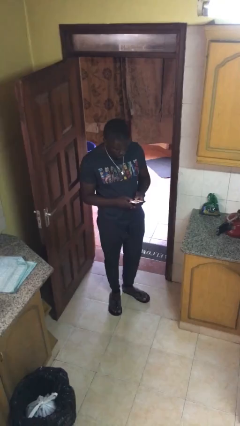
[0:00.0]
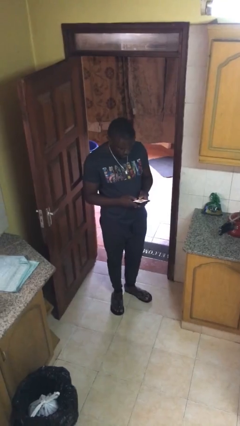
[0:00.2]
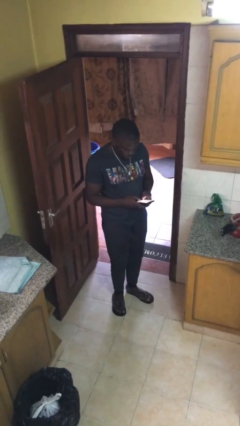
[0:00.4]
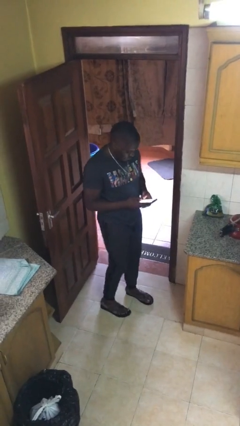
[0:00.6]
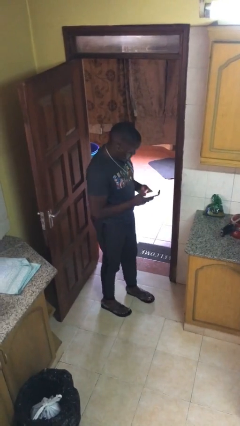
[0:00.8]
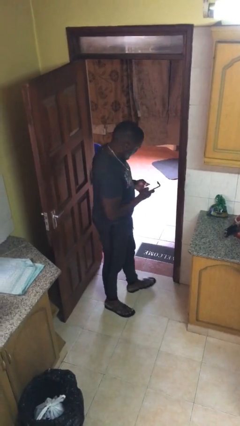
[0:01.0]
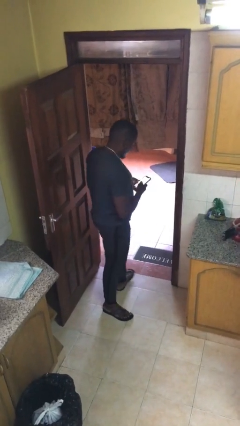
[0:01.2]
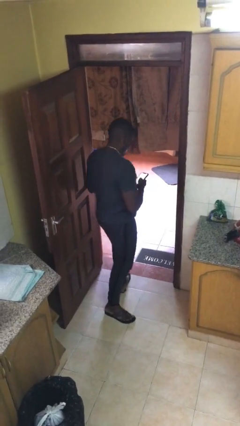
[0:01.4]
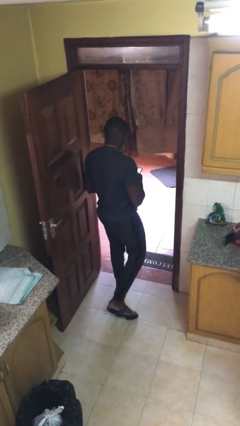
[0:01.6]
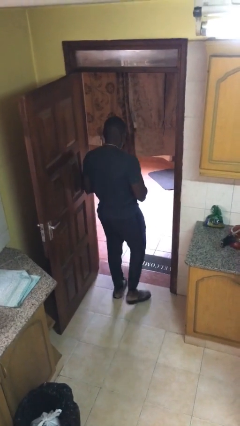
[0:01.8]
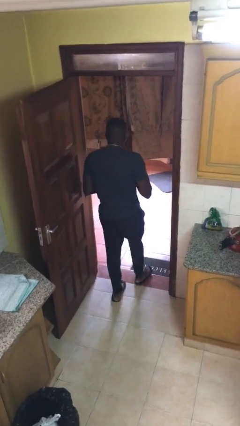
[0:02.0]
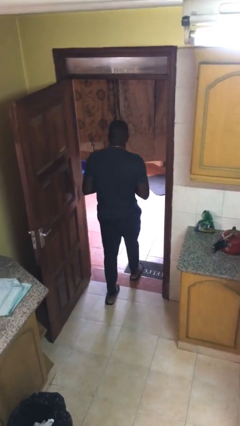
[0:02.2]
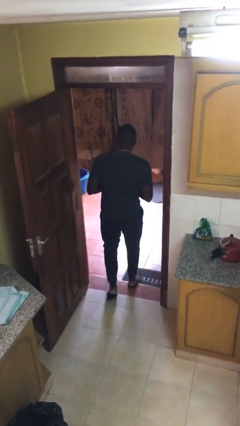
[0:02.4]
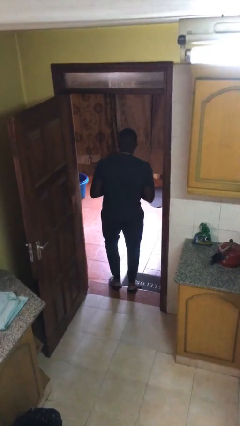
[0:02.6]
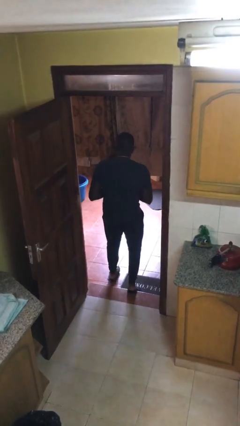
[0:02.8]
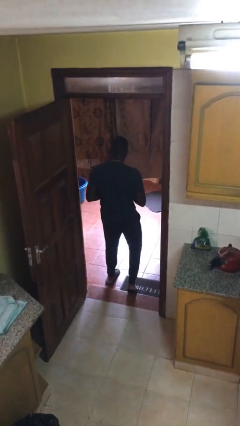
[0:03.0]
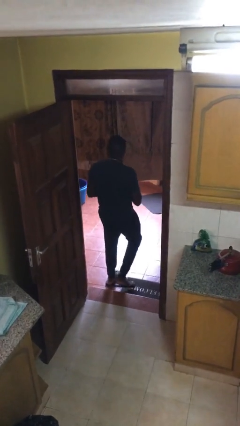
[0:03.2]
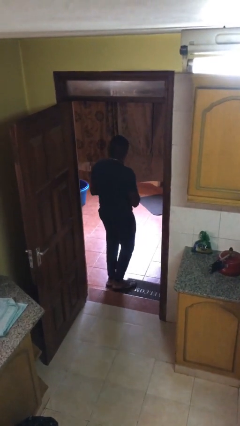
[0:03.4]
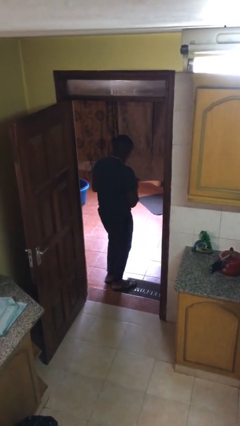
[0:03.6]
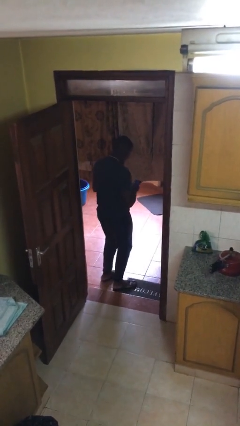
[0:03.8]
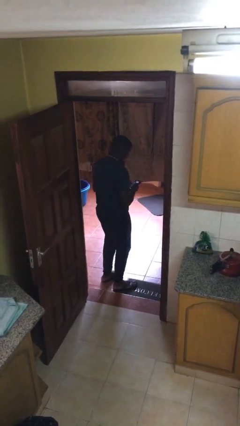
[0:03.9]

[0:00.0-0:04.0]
person exits scene through structure

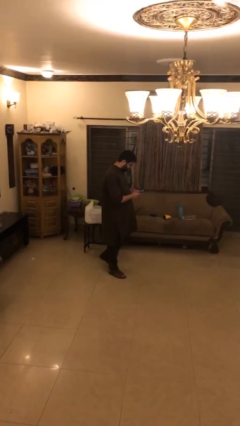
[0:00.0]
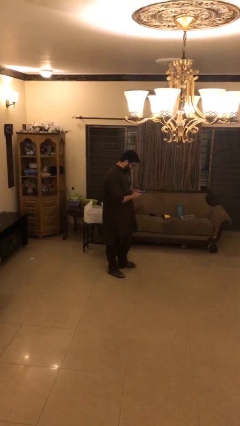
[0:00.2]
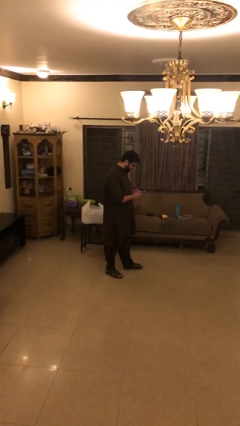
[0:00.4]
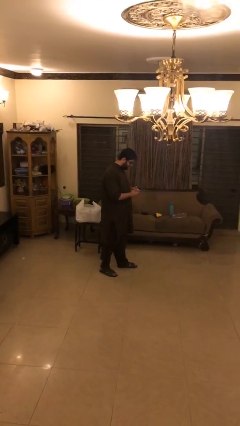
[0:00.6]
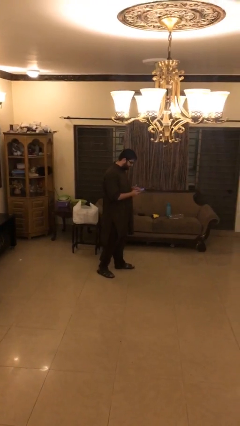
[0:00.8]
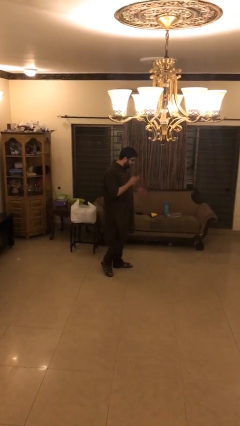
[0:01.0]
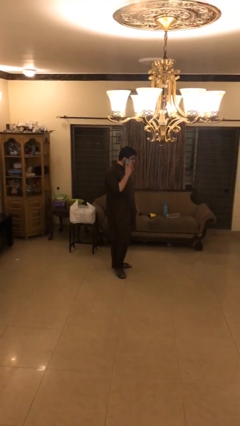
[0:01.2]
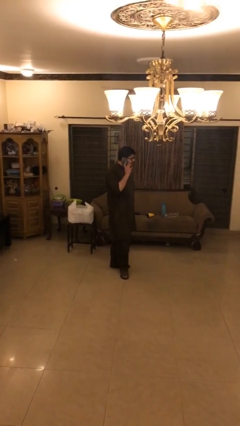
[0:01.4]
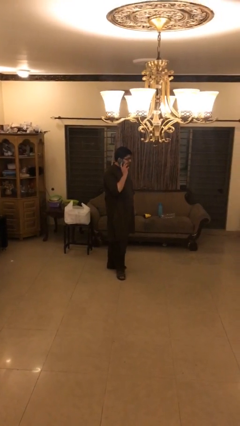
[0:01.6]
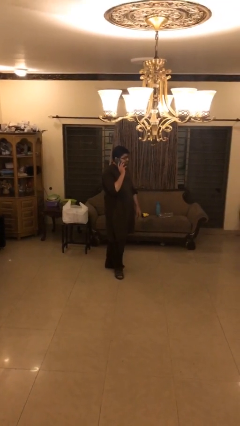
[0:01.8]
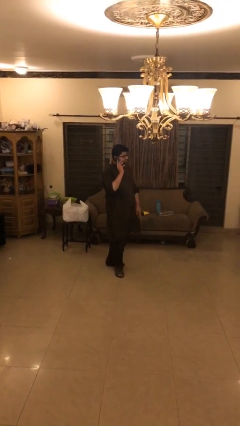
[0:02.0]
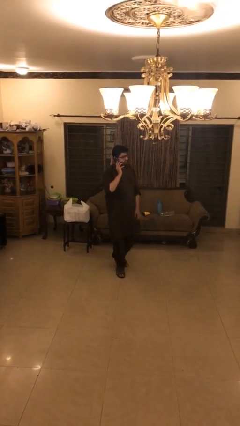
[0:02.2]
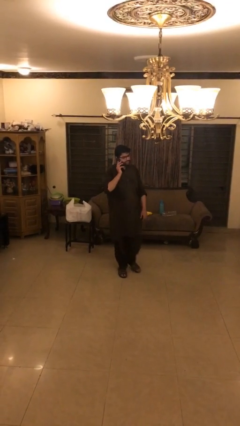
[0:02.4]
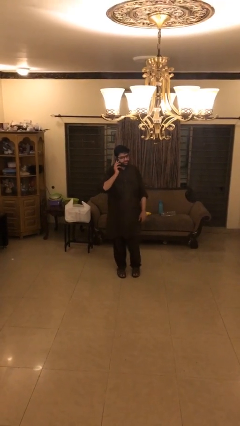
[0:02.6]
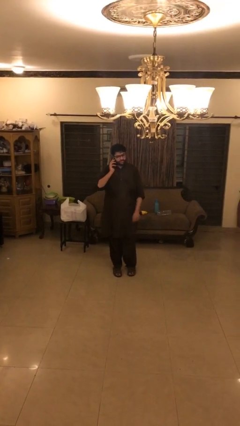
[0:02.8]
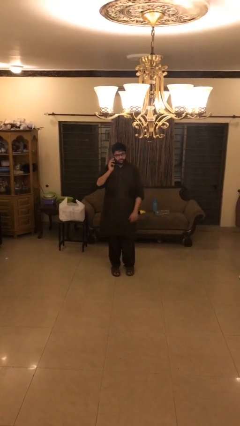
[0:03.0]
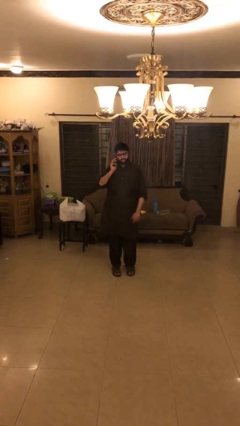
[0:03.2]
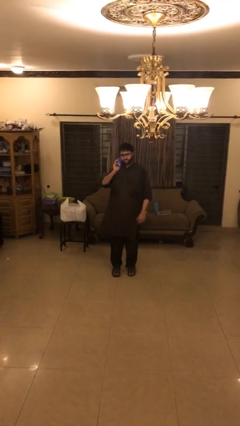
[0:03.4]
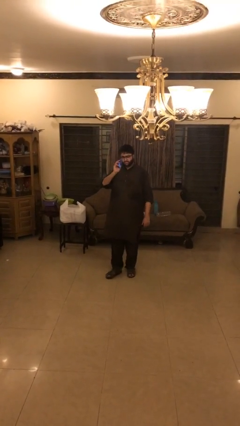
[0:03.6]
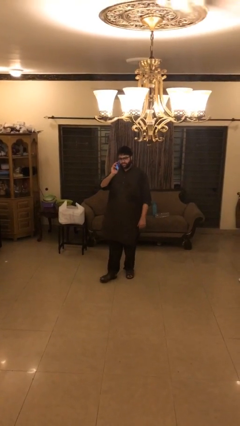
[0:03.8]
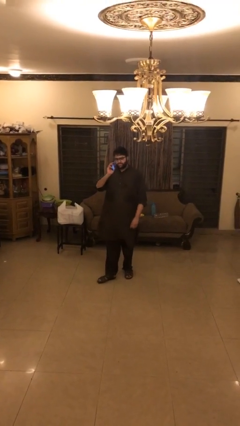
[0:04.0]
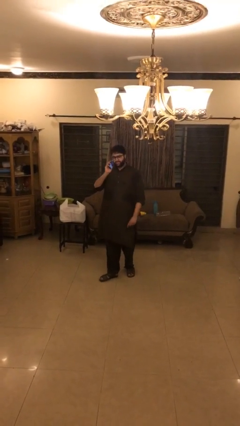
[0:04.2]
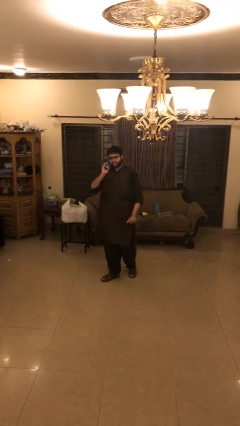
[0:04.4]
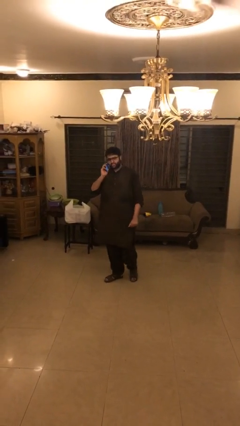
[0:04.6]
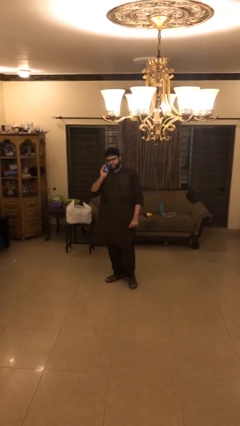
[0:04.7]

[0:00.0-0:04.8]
person talks on phone

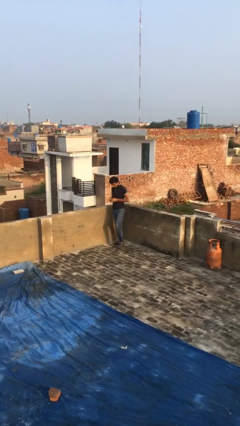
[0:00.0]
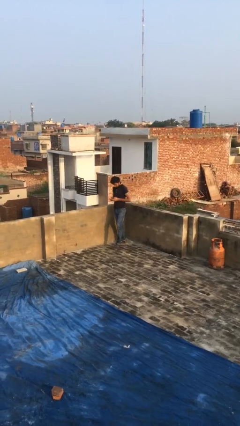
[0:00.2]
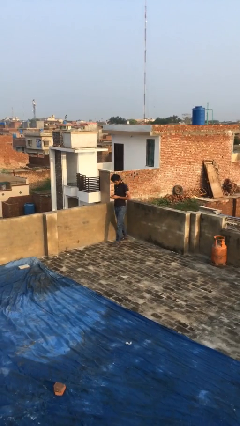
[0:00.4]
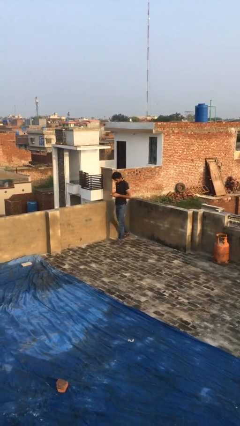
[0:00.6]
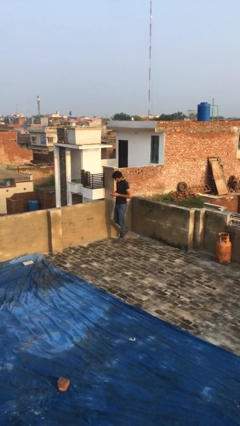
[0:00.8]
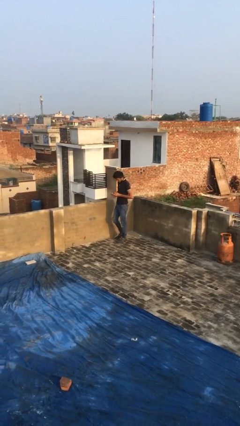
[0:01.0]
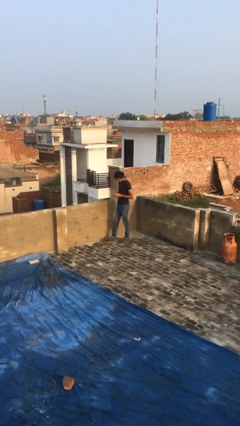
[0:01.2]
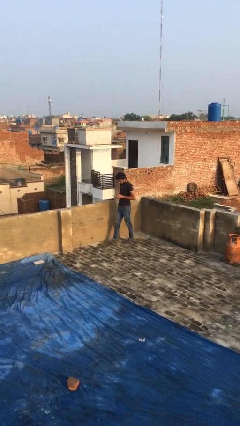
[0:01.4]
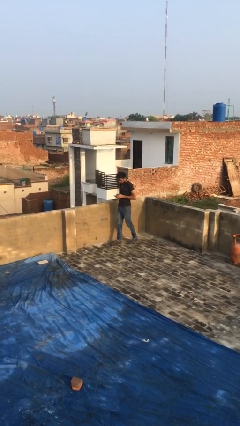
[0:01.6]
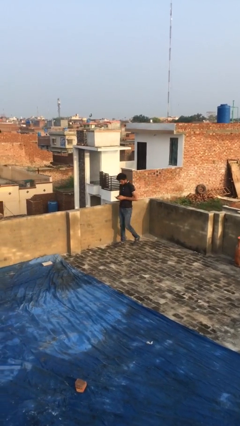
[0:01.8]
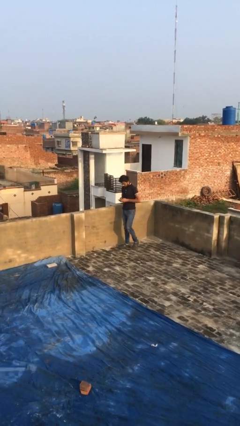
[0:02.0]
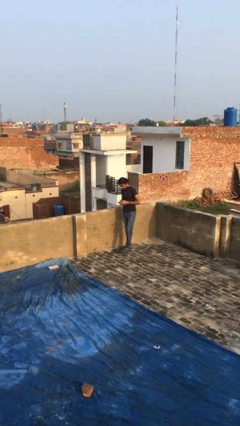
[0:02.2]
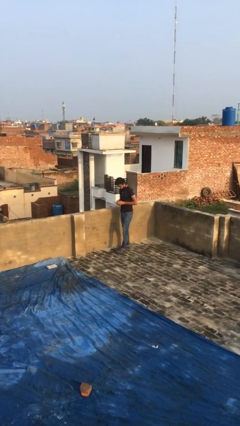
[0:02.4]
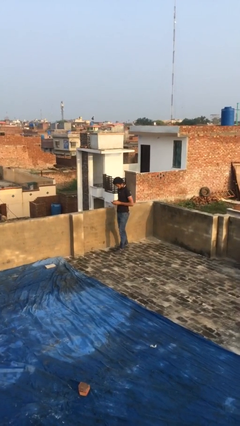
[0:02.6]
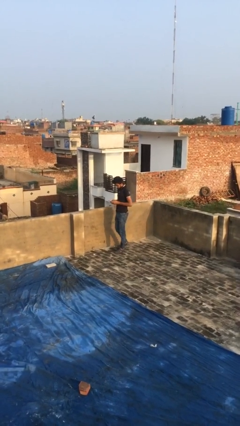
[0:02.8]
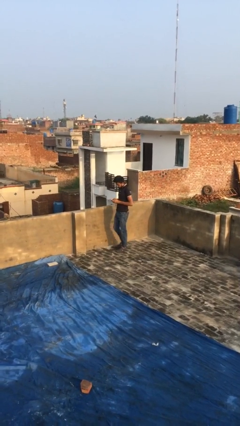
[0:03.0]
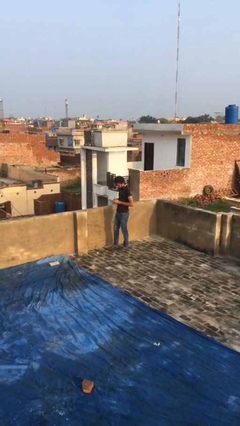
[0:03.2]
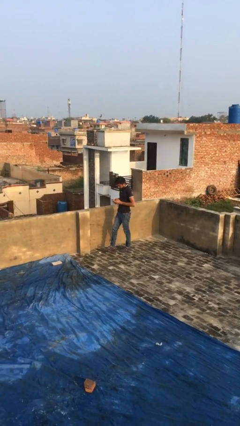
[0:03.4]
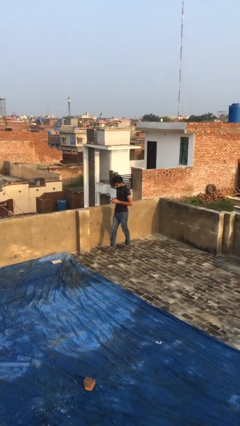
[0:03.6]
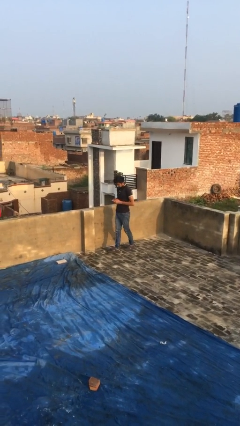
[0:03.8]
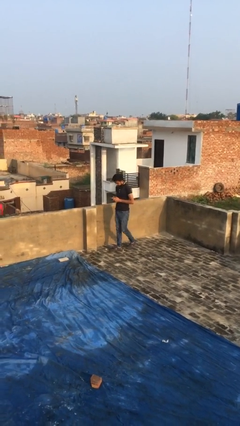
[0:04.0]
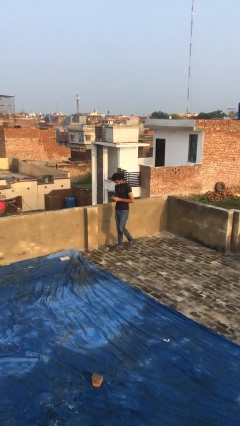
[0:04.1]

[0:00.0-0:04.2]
person texts on phone

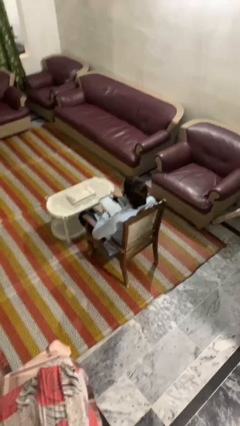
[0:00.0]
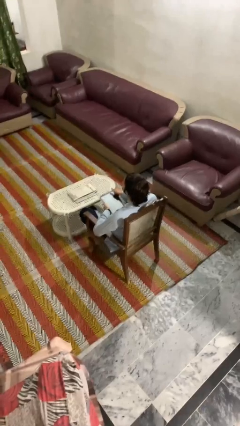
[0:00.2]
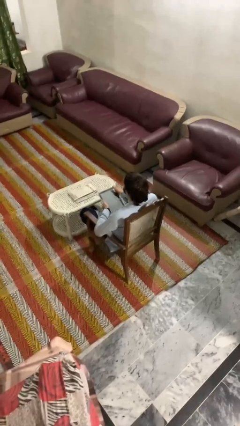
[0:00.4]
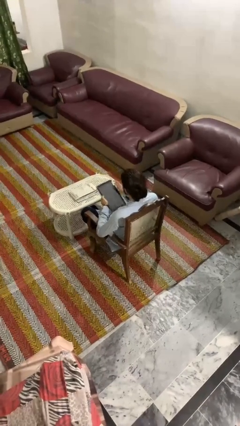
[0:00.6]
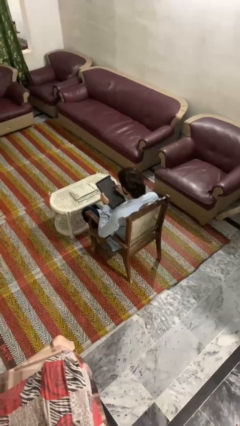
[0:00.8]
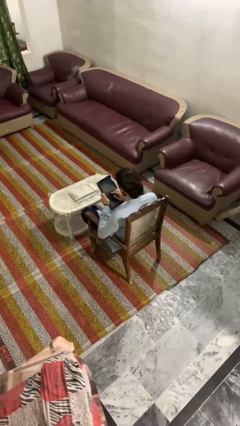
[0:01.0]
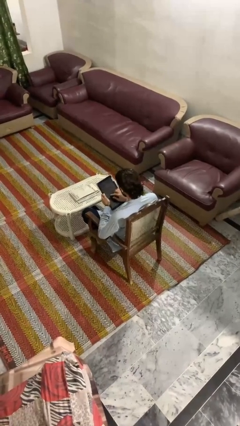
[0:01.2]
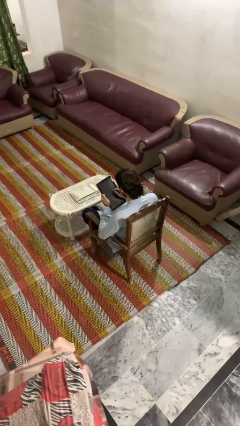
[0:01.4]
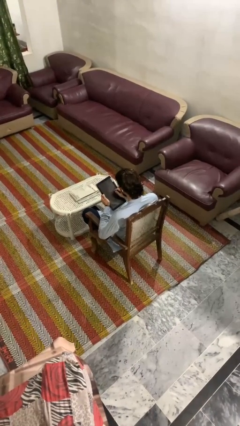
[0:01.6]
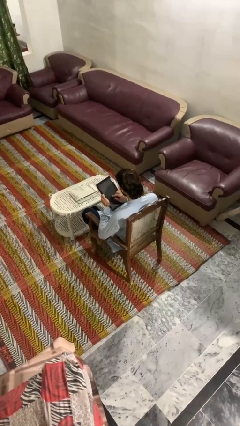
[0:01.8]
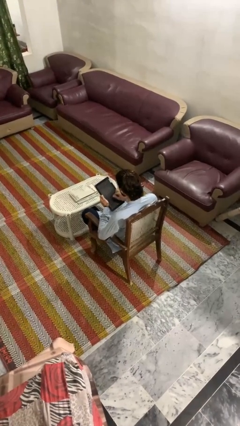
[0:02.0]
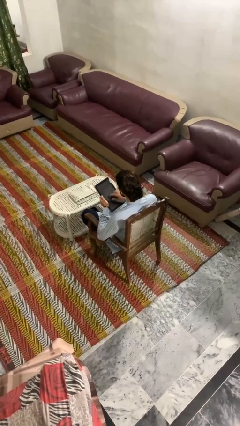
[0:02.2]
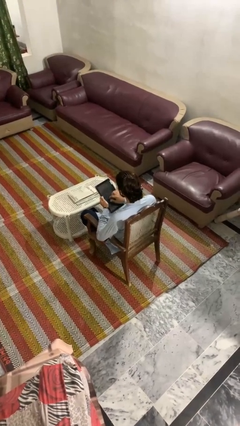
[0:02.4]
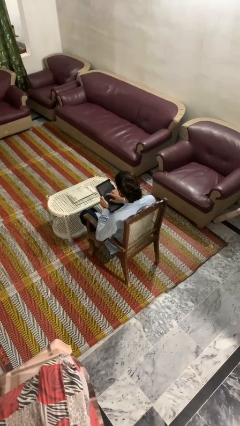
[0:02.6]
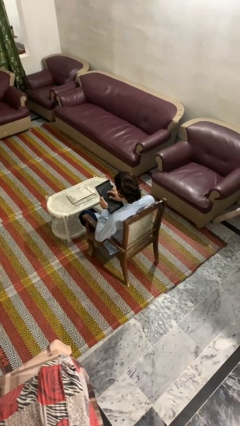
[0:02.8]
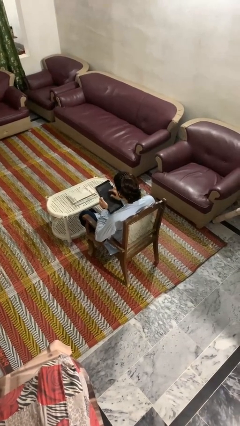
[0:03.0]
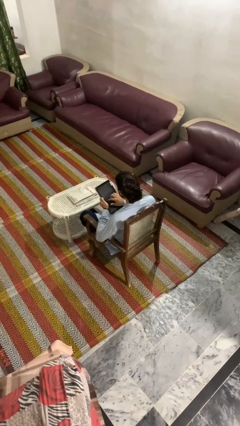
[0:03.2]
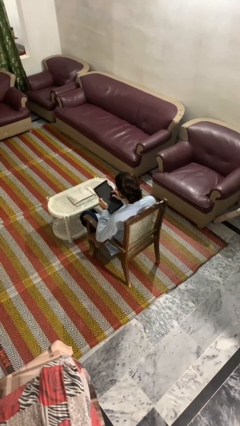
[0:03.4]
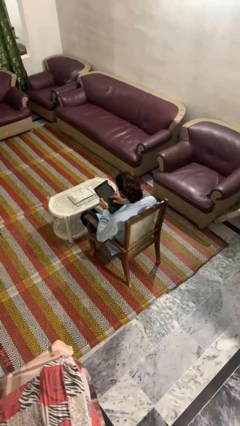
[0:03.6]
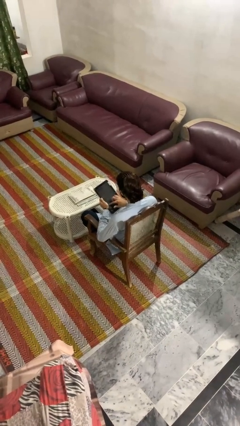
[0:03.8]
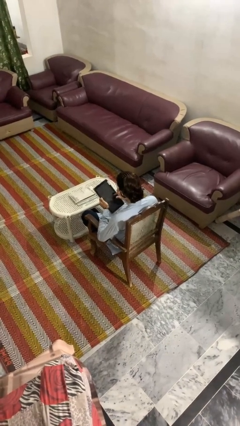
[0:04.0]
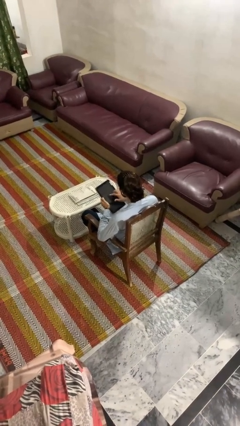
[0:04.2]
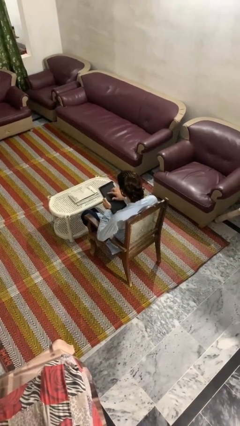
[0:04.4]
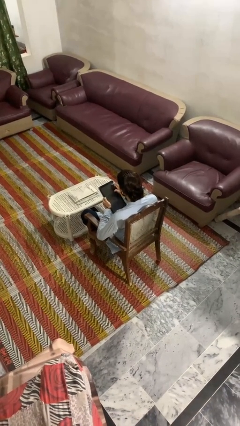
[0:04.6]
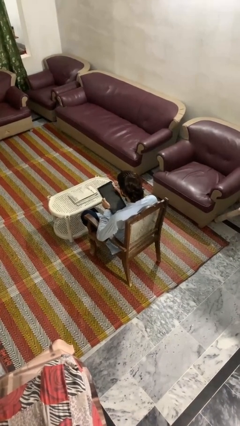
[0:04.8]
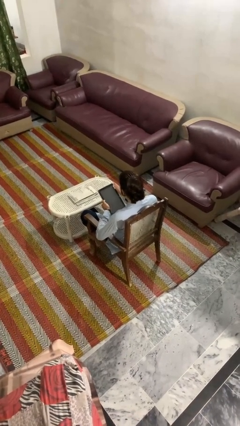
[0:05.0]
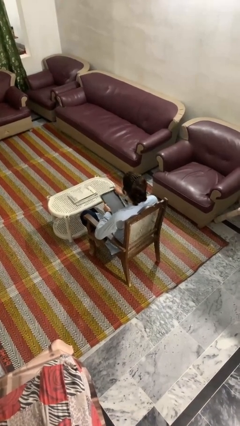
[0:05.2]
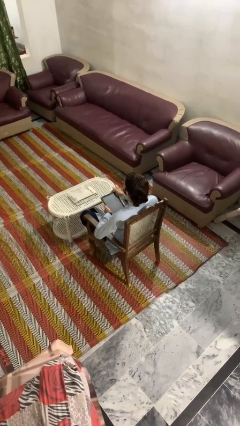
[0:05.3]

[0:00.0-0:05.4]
person interacts with tablet
